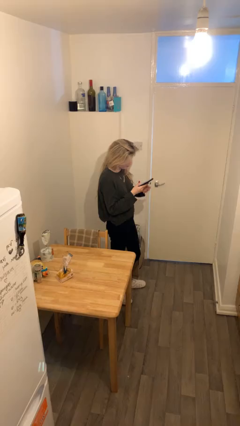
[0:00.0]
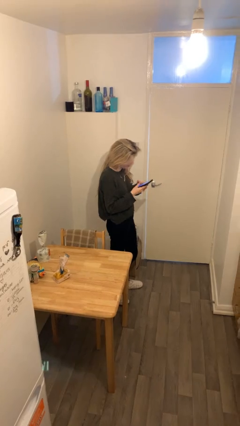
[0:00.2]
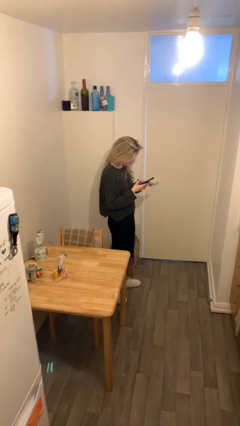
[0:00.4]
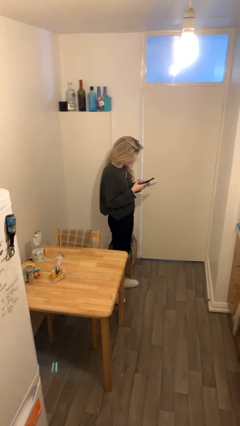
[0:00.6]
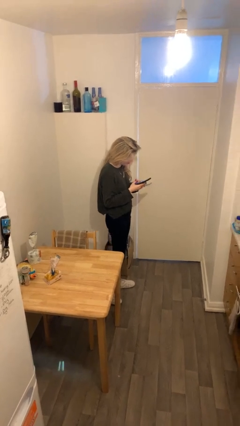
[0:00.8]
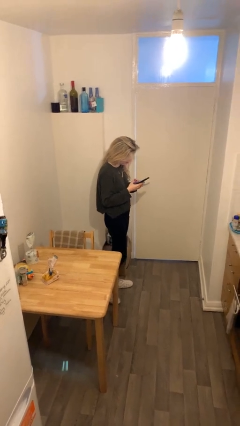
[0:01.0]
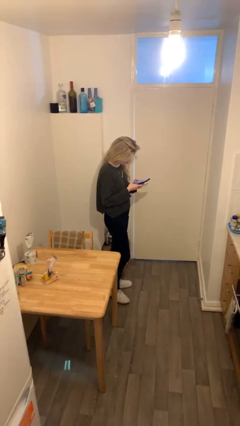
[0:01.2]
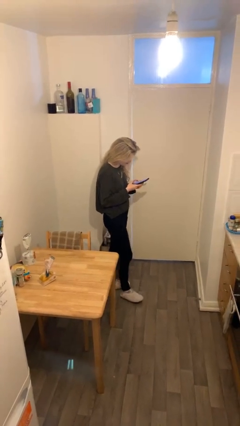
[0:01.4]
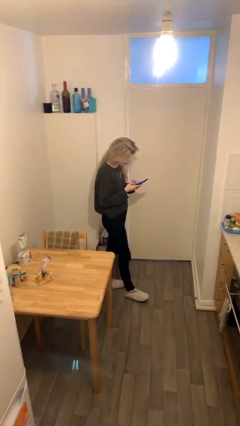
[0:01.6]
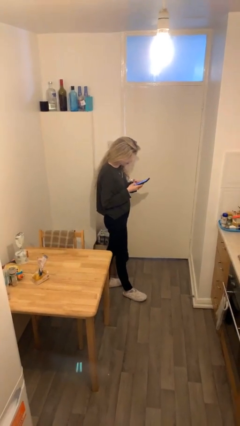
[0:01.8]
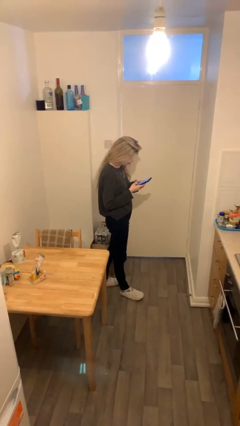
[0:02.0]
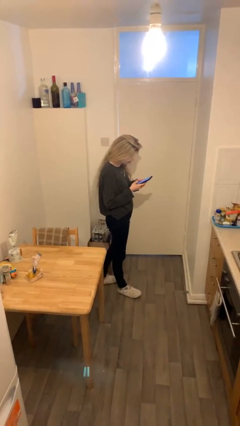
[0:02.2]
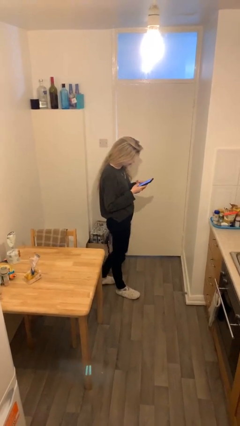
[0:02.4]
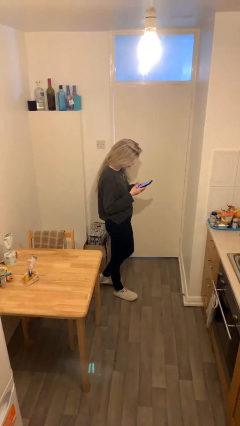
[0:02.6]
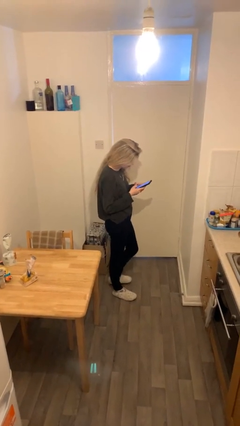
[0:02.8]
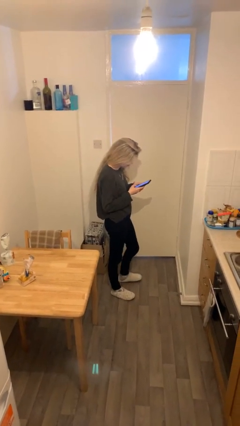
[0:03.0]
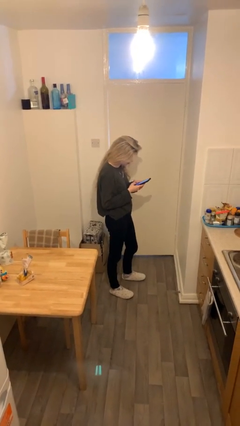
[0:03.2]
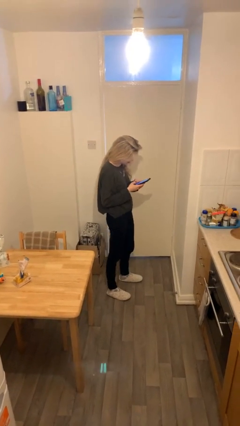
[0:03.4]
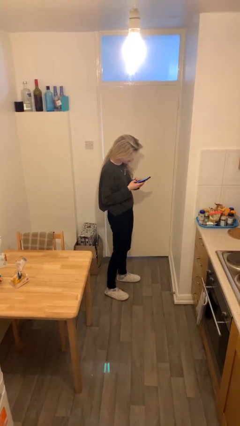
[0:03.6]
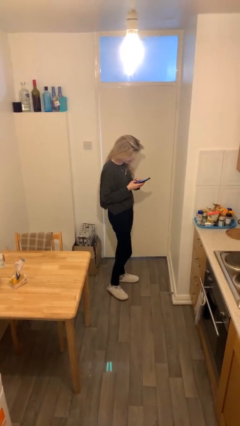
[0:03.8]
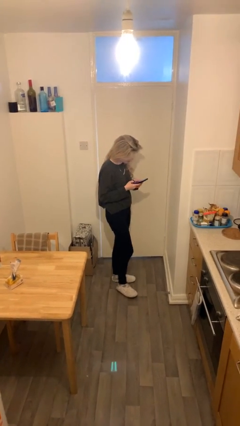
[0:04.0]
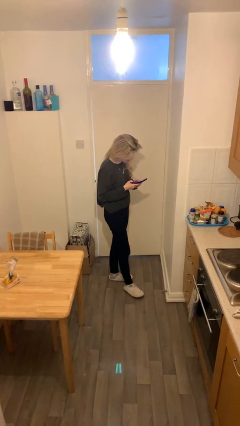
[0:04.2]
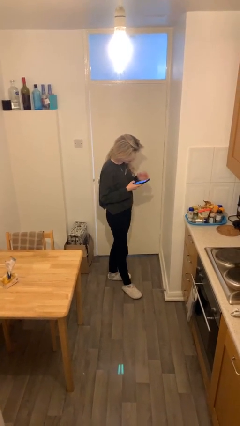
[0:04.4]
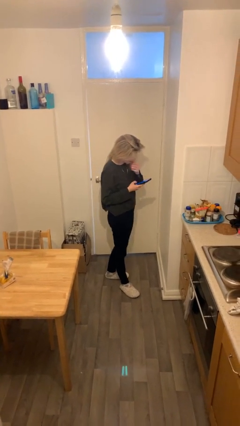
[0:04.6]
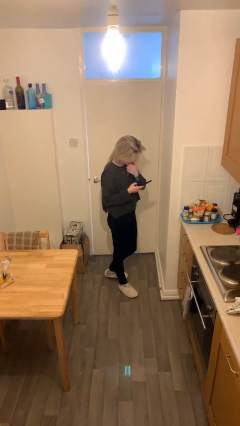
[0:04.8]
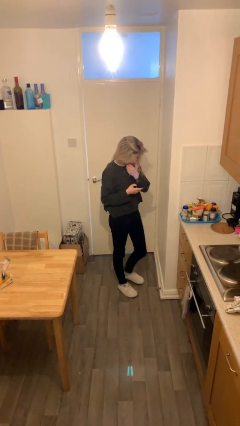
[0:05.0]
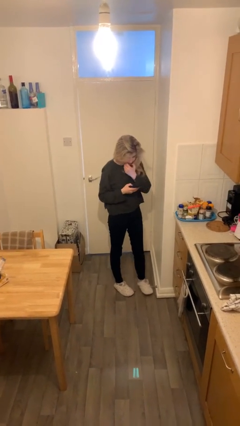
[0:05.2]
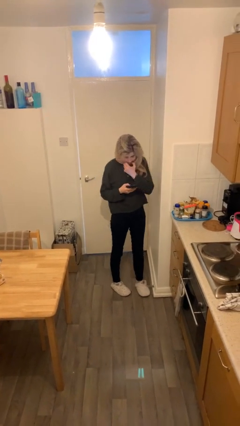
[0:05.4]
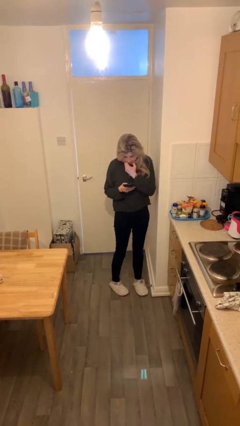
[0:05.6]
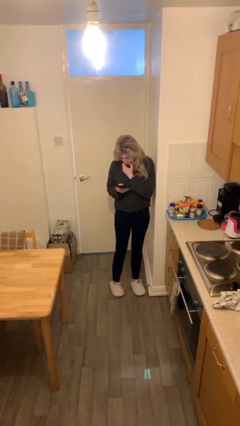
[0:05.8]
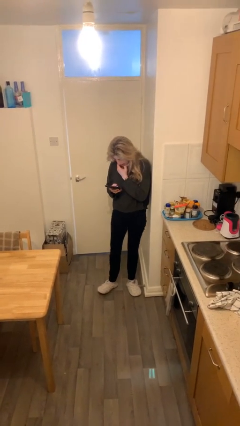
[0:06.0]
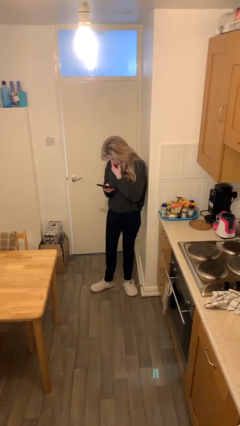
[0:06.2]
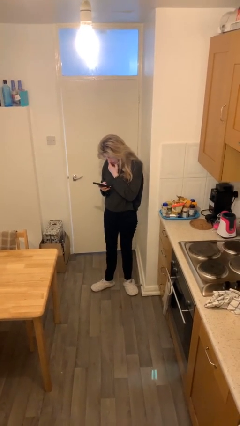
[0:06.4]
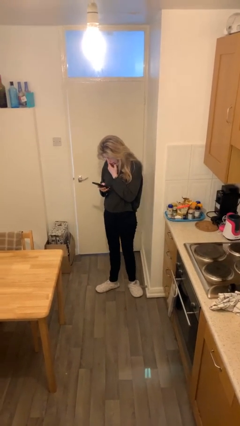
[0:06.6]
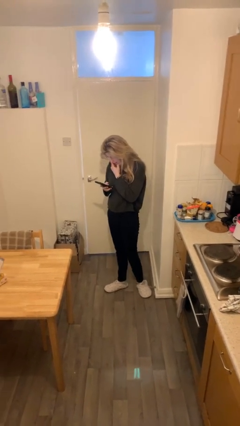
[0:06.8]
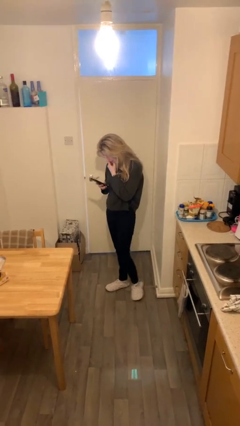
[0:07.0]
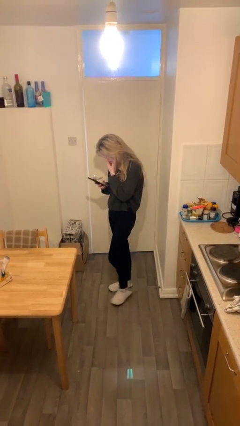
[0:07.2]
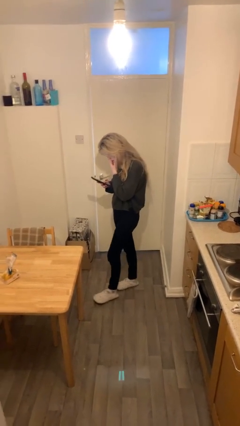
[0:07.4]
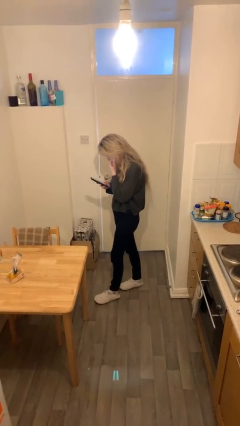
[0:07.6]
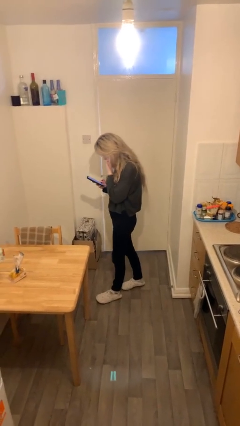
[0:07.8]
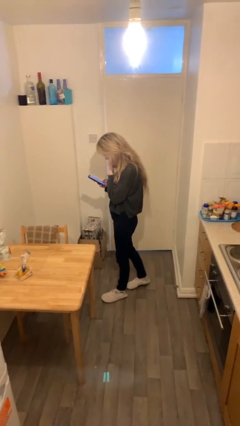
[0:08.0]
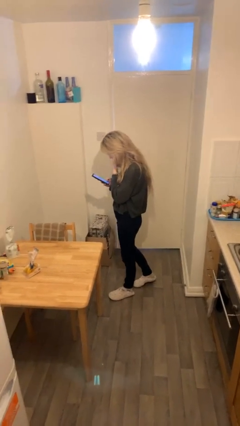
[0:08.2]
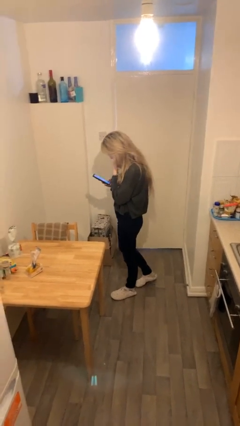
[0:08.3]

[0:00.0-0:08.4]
person texts on phone

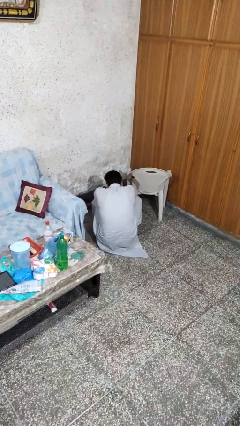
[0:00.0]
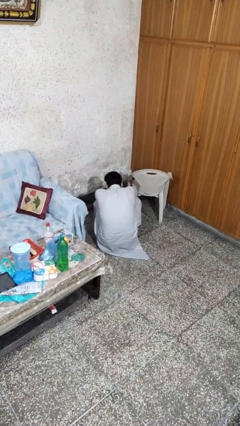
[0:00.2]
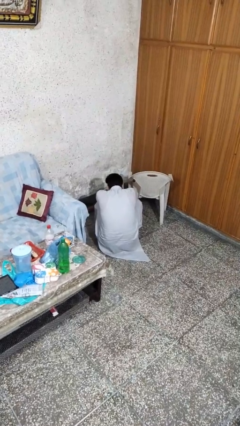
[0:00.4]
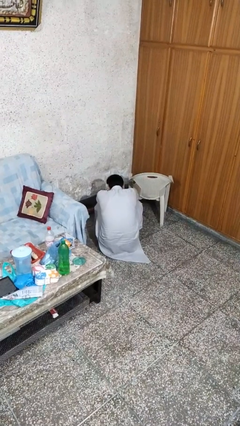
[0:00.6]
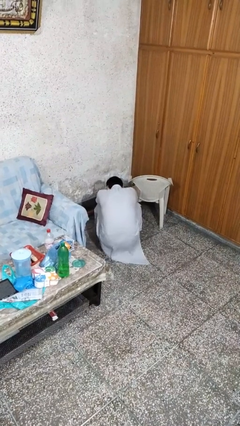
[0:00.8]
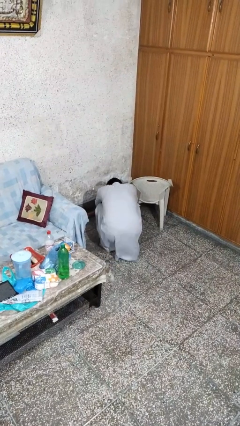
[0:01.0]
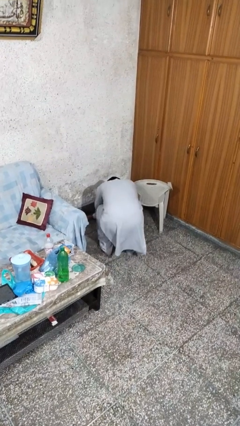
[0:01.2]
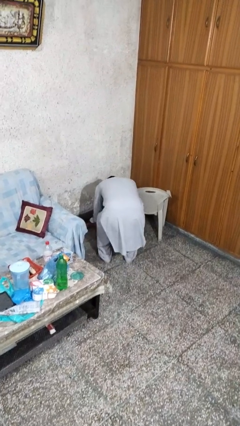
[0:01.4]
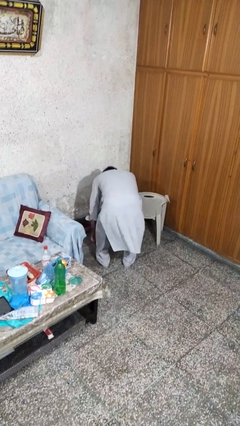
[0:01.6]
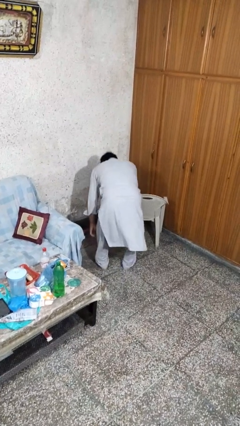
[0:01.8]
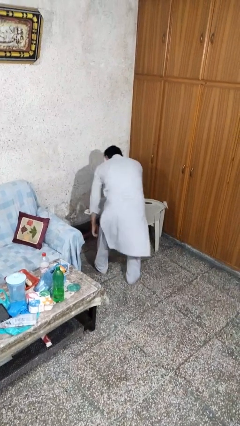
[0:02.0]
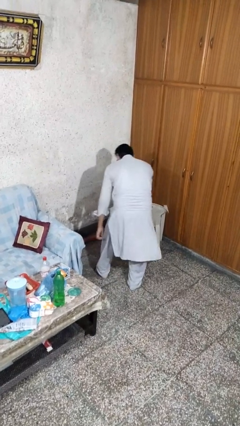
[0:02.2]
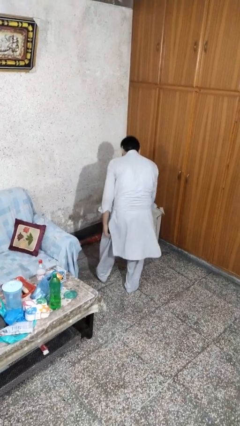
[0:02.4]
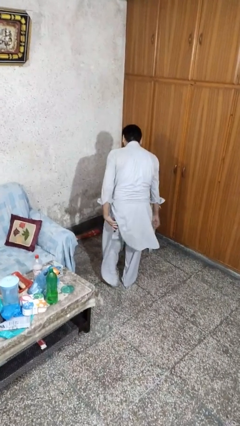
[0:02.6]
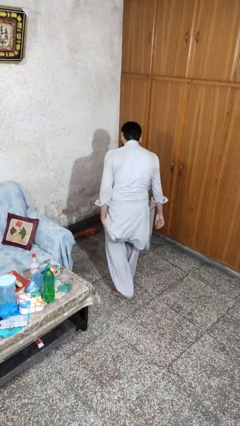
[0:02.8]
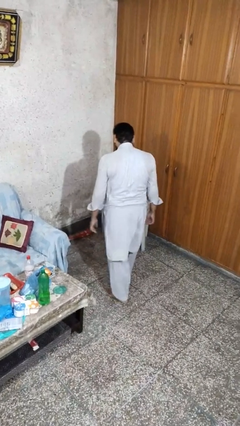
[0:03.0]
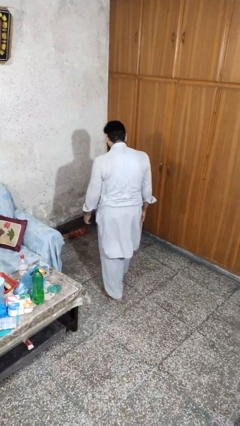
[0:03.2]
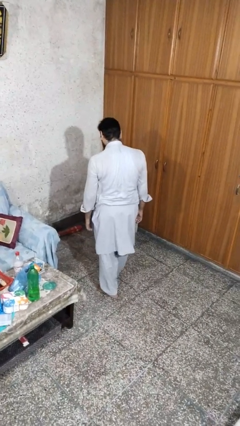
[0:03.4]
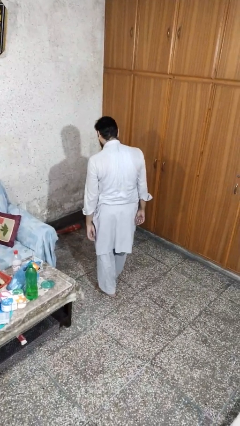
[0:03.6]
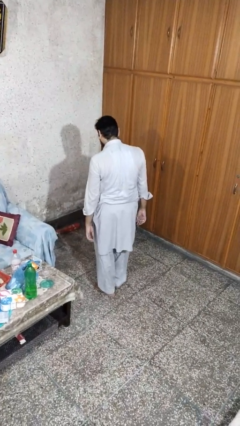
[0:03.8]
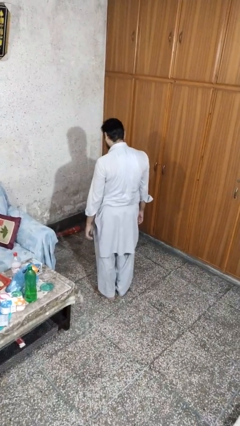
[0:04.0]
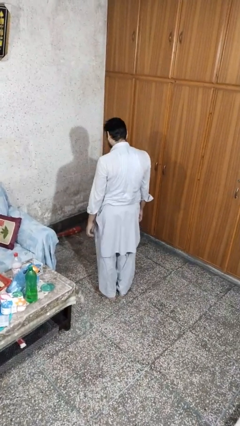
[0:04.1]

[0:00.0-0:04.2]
person stands up from floor

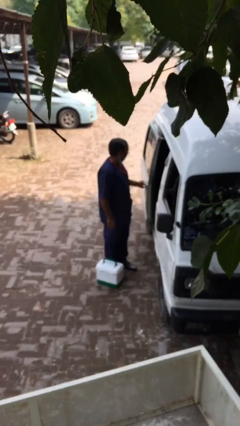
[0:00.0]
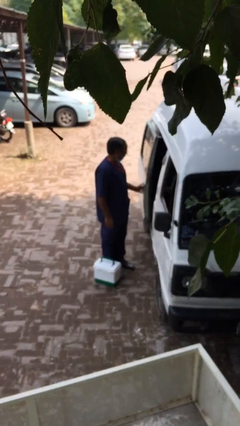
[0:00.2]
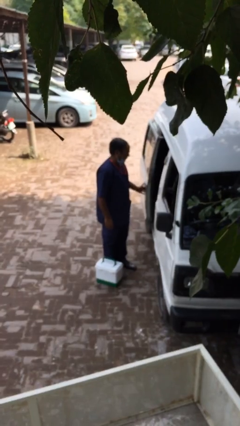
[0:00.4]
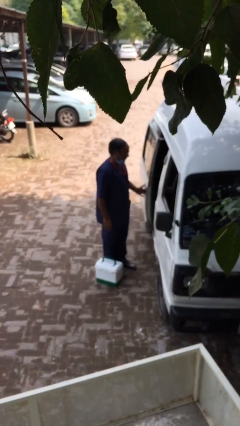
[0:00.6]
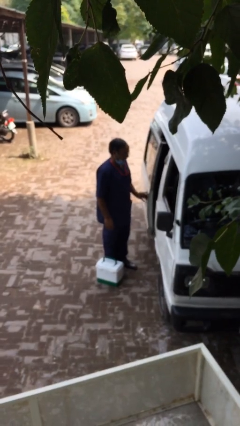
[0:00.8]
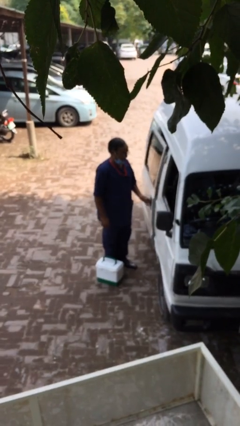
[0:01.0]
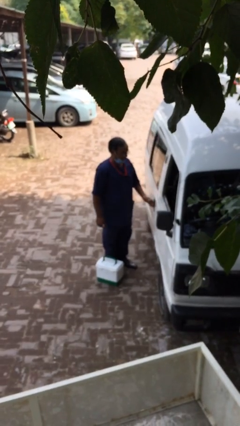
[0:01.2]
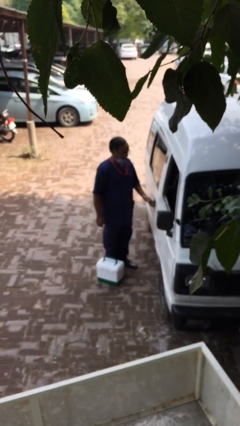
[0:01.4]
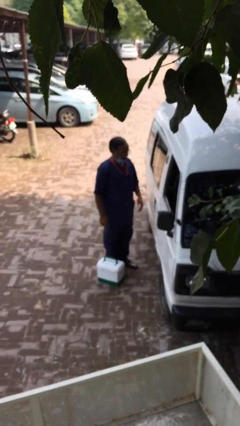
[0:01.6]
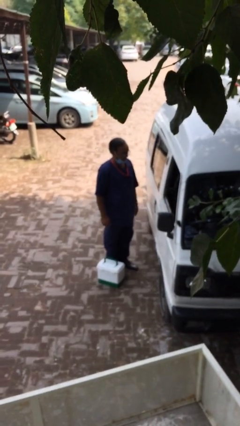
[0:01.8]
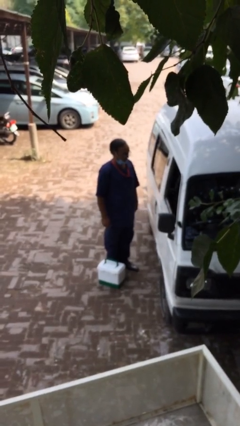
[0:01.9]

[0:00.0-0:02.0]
person closes car door

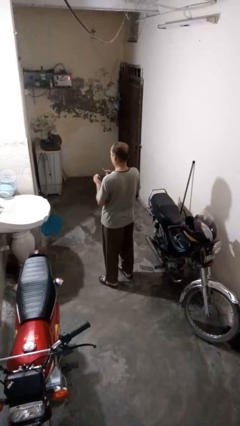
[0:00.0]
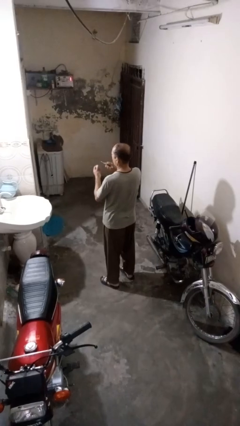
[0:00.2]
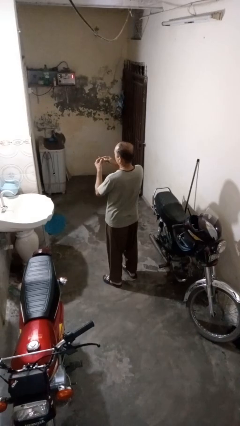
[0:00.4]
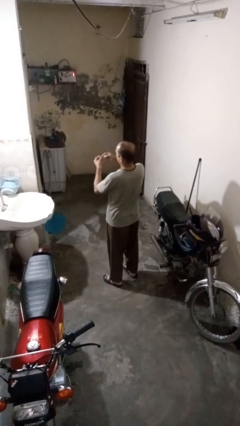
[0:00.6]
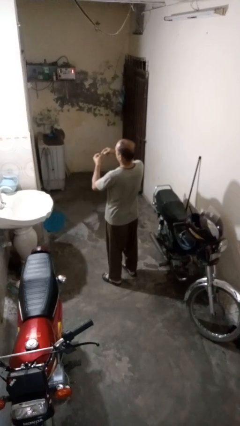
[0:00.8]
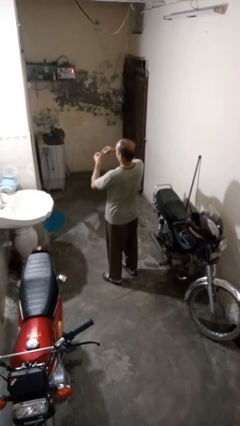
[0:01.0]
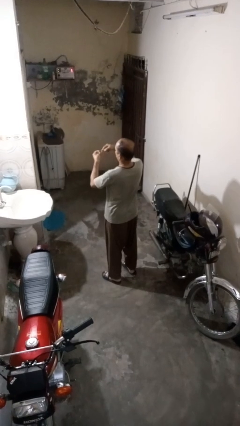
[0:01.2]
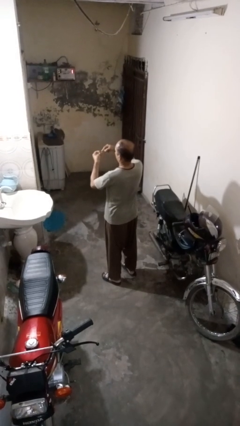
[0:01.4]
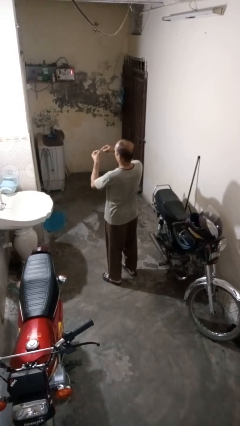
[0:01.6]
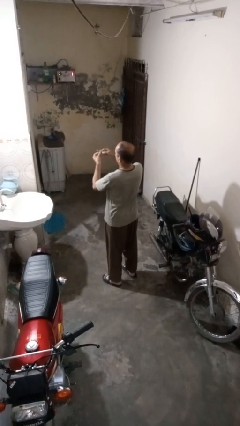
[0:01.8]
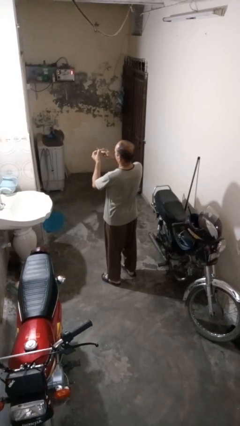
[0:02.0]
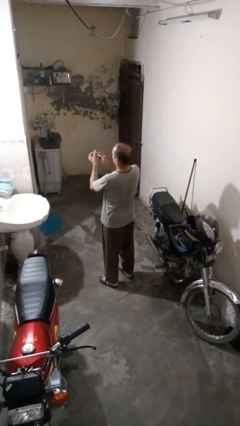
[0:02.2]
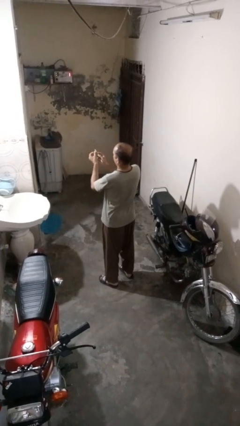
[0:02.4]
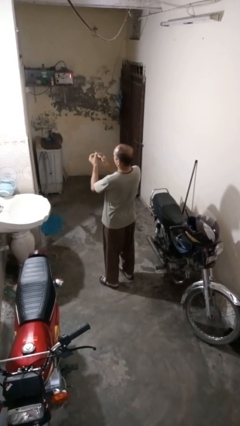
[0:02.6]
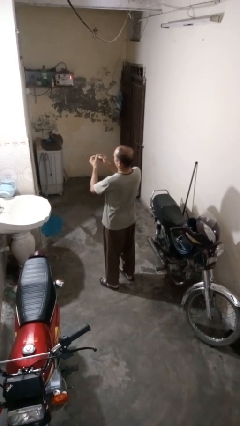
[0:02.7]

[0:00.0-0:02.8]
person files fingernails

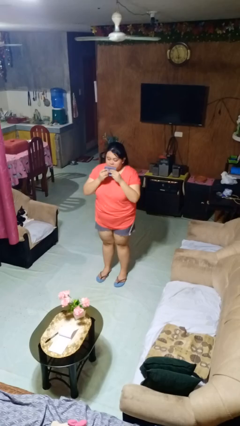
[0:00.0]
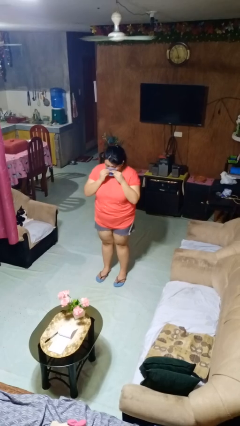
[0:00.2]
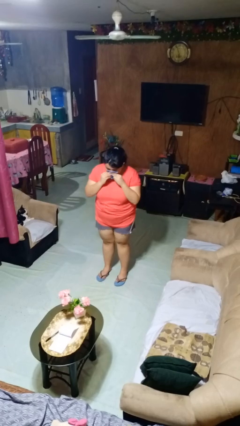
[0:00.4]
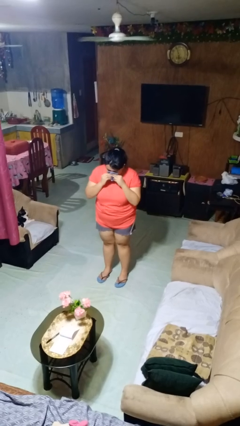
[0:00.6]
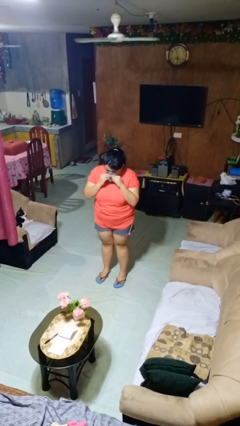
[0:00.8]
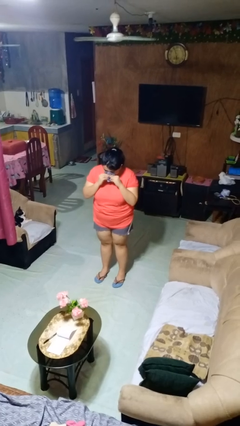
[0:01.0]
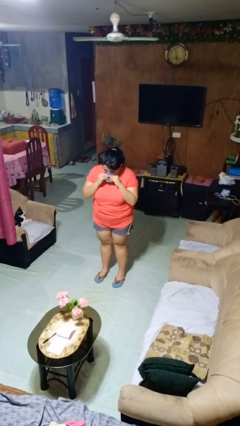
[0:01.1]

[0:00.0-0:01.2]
person blows nose
